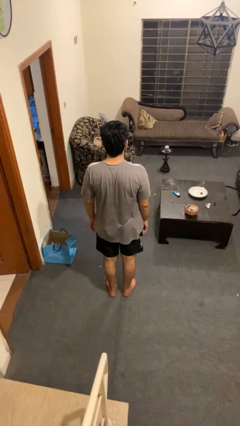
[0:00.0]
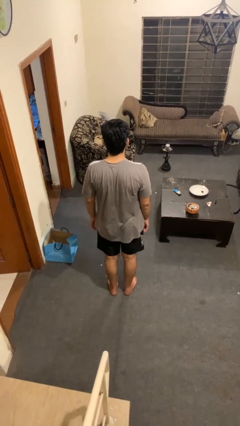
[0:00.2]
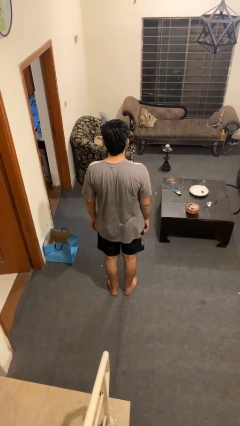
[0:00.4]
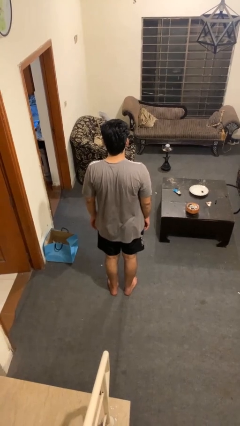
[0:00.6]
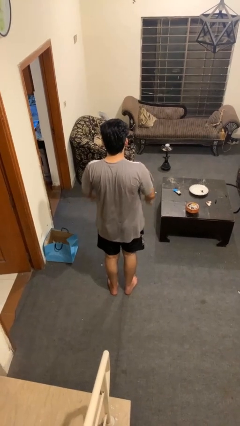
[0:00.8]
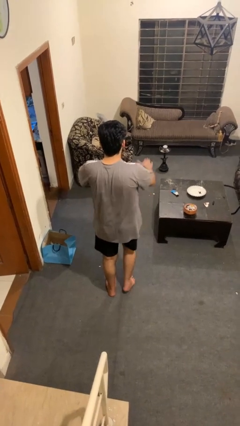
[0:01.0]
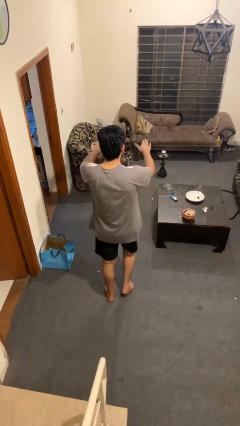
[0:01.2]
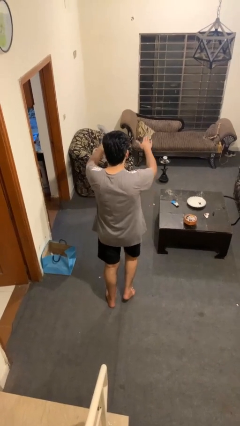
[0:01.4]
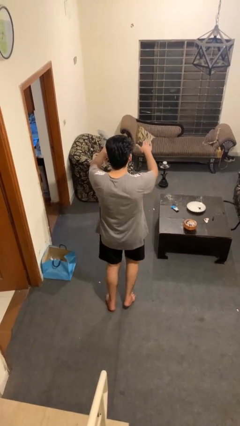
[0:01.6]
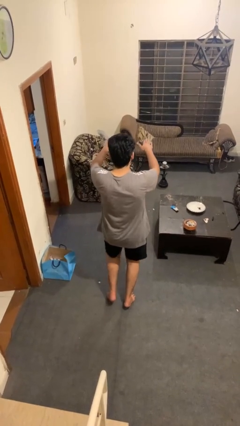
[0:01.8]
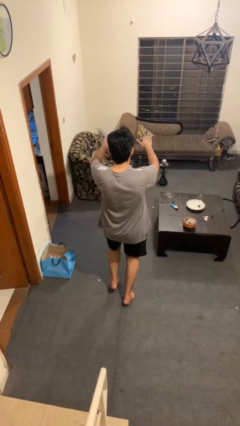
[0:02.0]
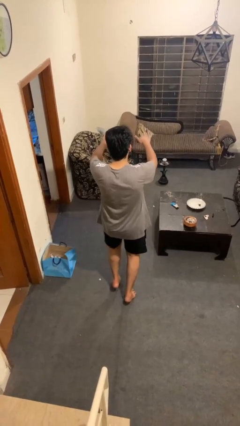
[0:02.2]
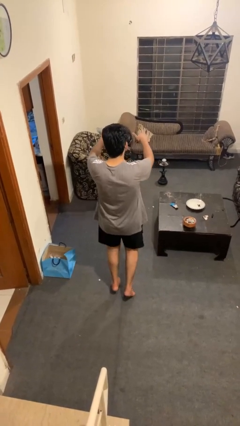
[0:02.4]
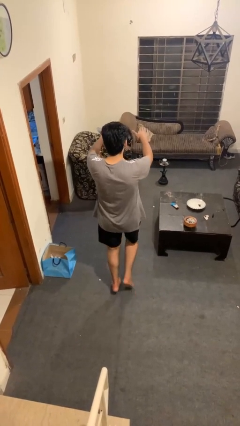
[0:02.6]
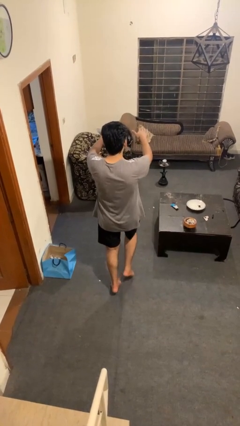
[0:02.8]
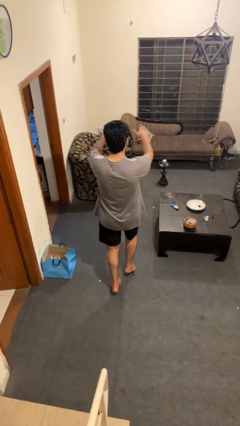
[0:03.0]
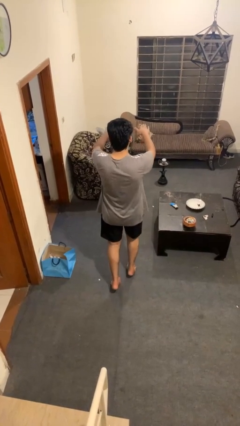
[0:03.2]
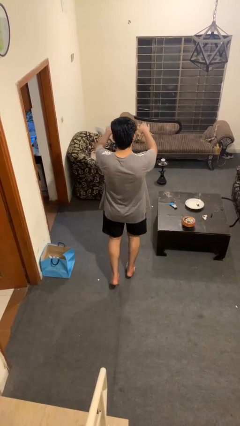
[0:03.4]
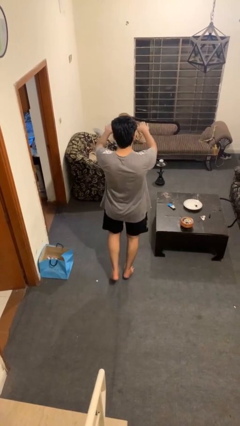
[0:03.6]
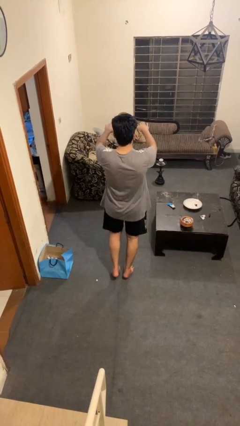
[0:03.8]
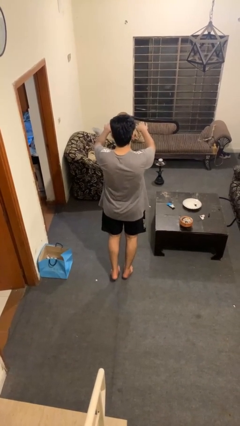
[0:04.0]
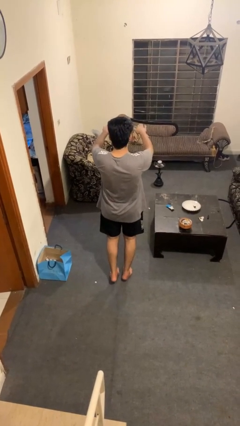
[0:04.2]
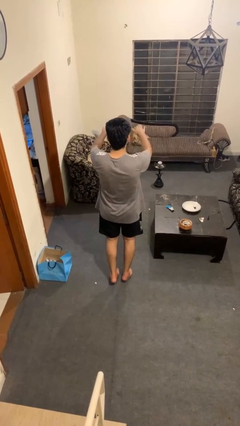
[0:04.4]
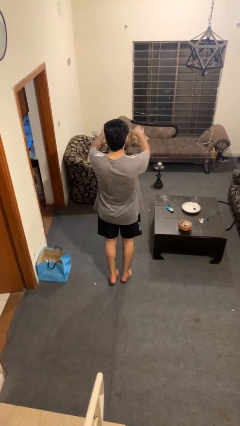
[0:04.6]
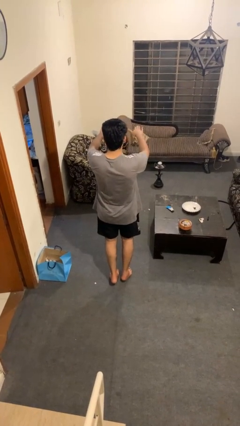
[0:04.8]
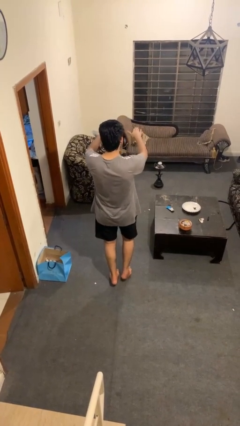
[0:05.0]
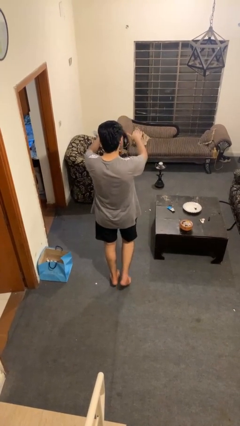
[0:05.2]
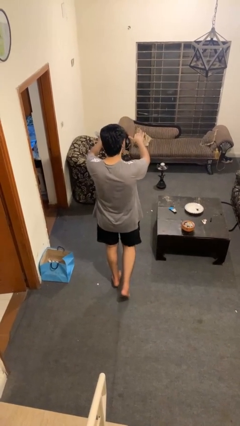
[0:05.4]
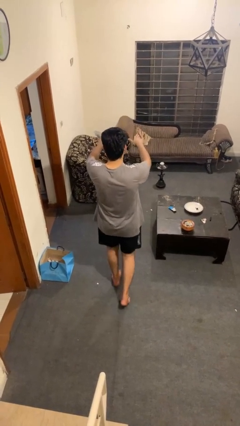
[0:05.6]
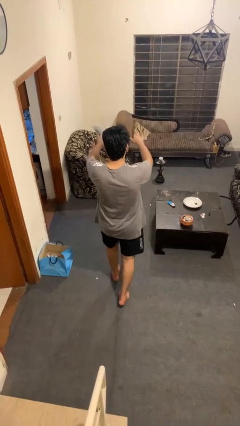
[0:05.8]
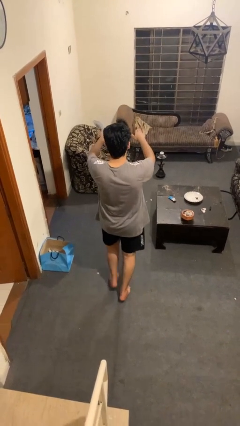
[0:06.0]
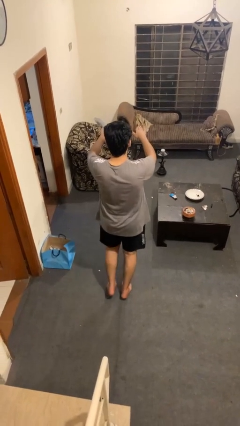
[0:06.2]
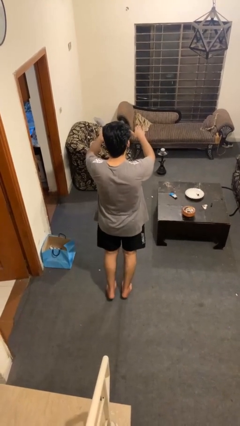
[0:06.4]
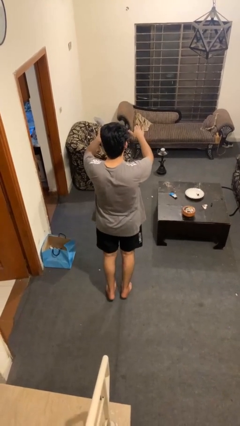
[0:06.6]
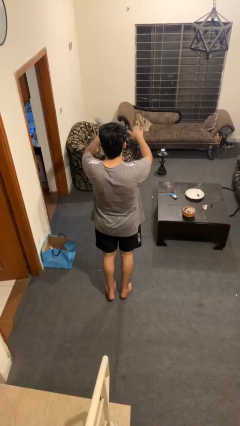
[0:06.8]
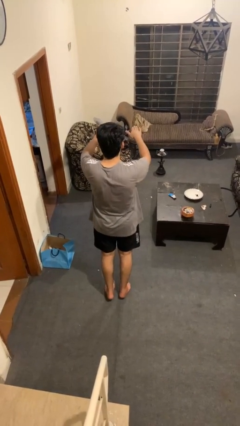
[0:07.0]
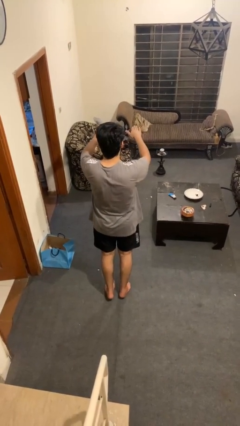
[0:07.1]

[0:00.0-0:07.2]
person walks tiptoe

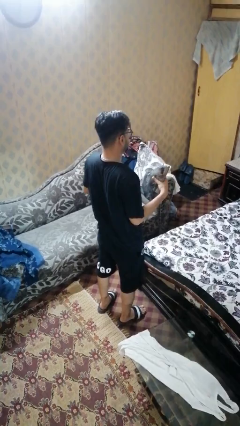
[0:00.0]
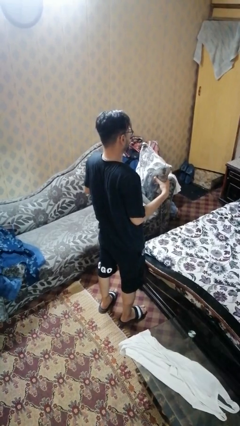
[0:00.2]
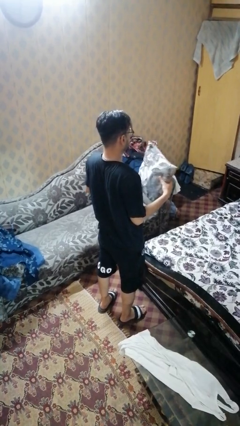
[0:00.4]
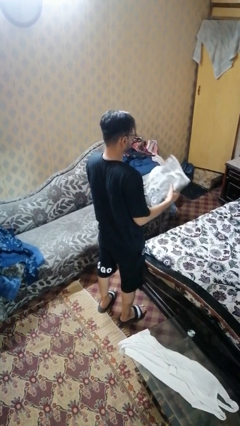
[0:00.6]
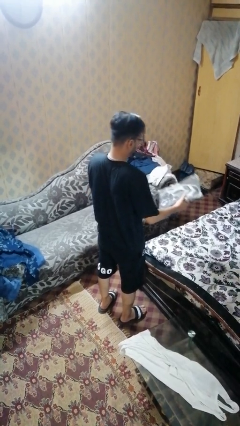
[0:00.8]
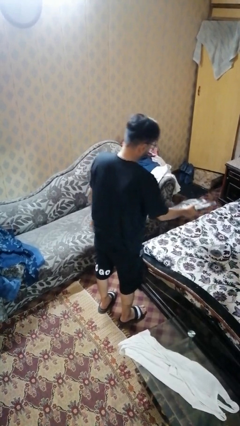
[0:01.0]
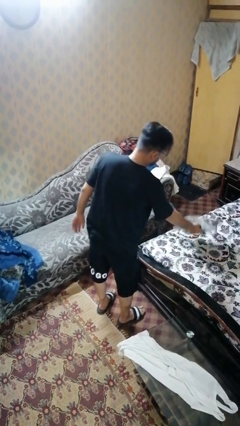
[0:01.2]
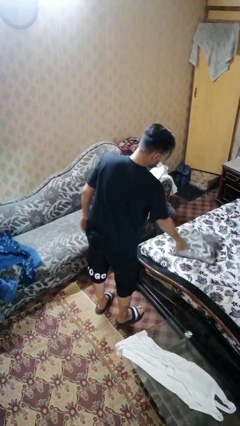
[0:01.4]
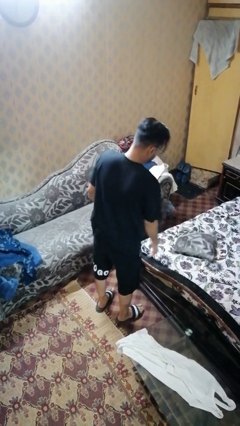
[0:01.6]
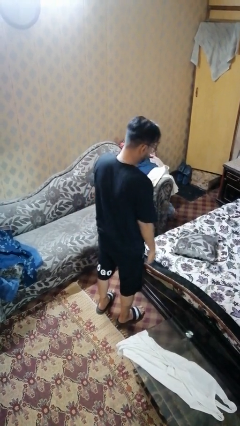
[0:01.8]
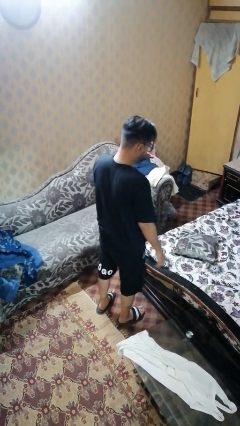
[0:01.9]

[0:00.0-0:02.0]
person puts down object on bed

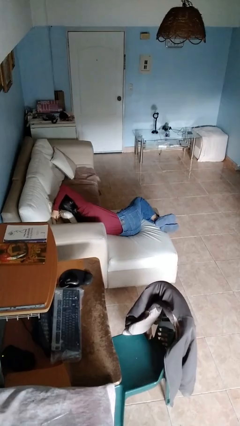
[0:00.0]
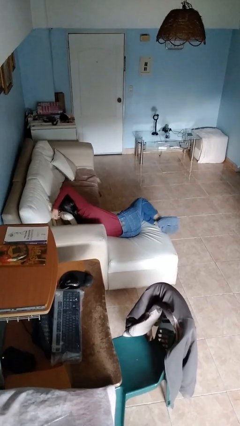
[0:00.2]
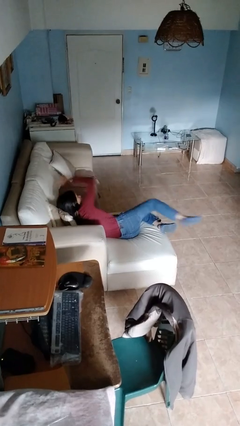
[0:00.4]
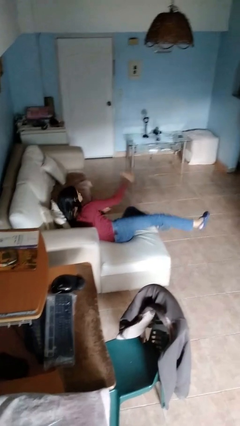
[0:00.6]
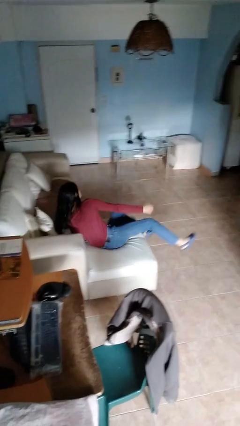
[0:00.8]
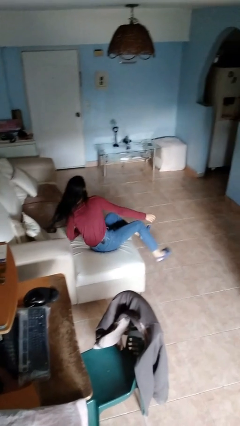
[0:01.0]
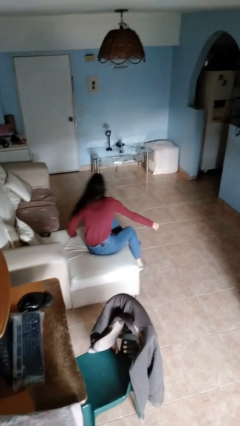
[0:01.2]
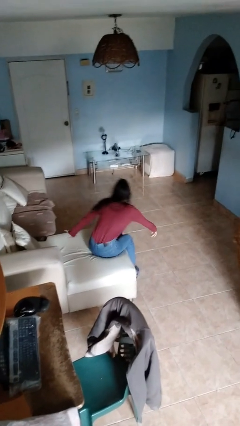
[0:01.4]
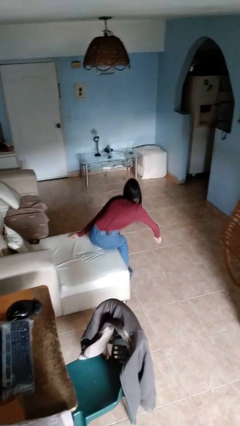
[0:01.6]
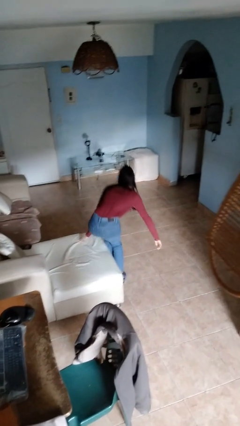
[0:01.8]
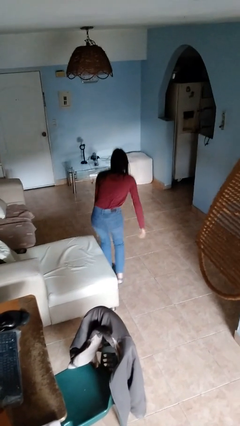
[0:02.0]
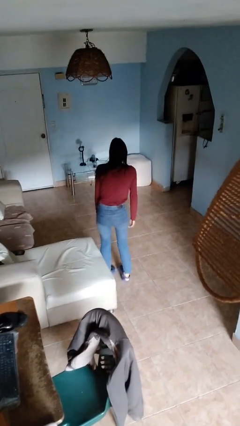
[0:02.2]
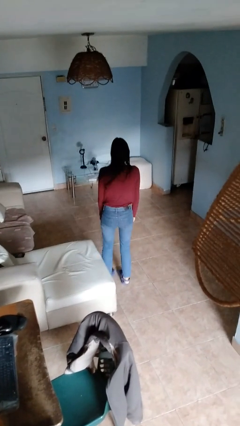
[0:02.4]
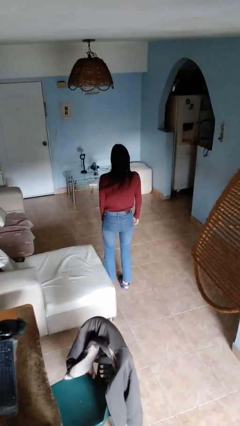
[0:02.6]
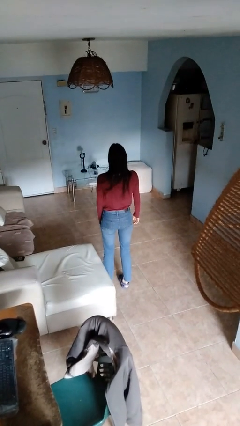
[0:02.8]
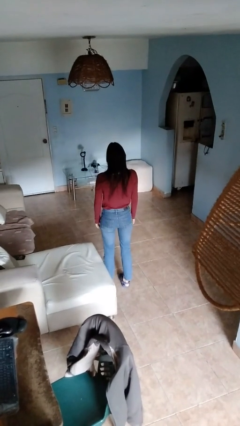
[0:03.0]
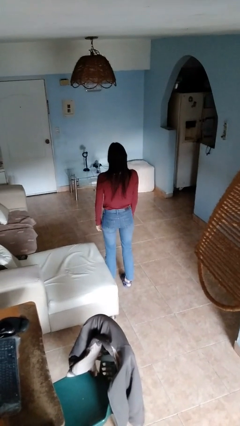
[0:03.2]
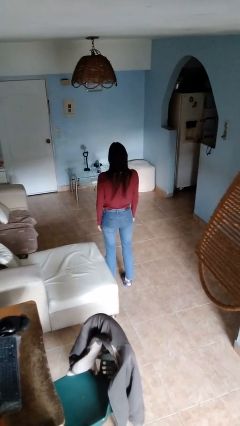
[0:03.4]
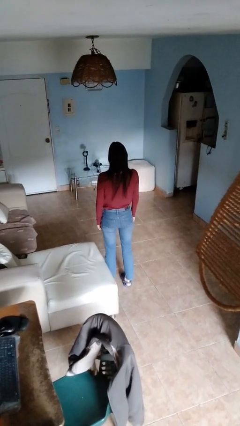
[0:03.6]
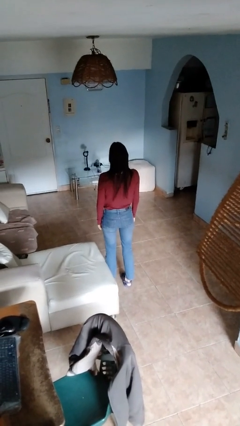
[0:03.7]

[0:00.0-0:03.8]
person stands up

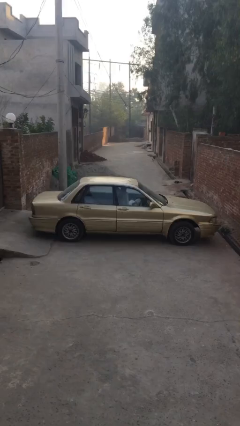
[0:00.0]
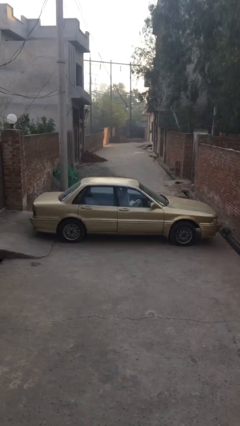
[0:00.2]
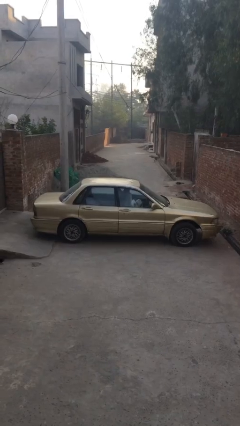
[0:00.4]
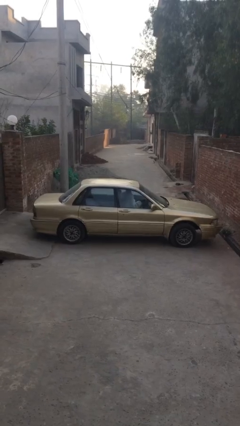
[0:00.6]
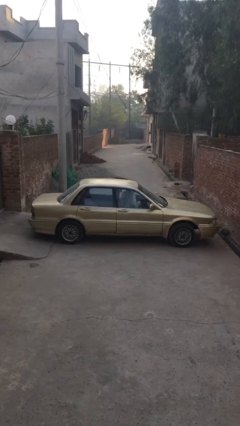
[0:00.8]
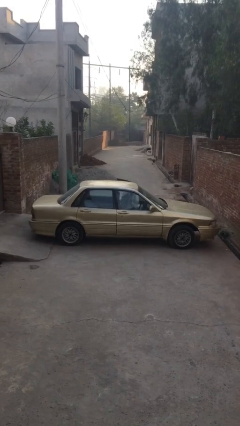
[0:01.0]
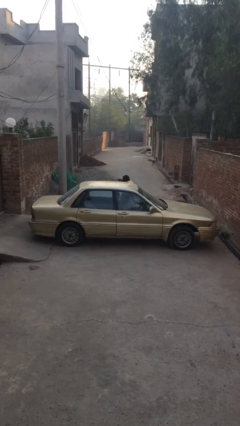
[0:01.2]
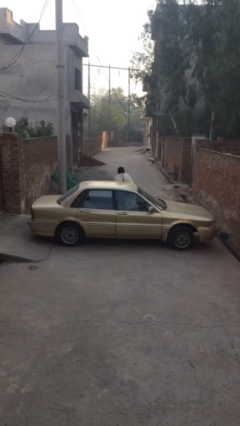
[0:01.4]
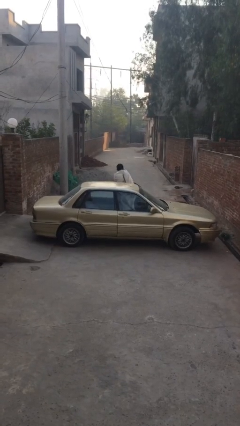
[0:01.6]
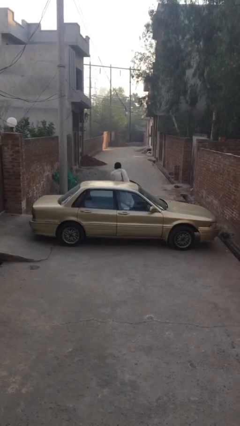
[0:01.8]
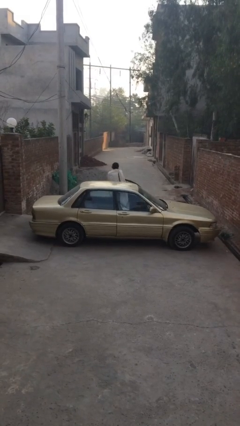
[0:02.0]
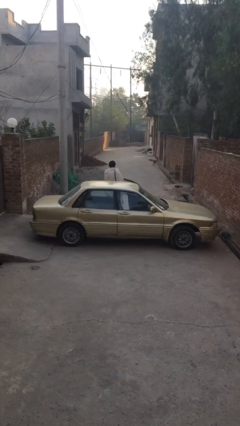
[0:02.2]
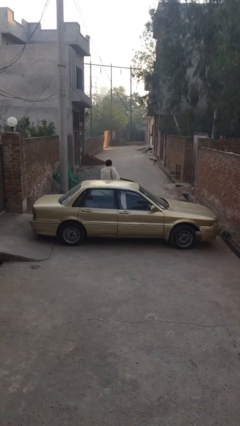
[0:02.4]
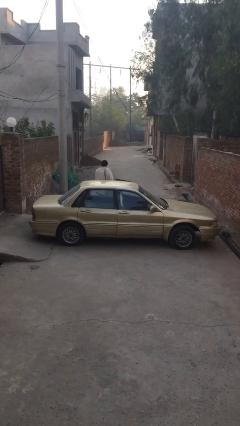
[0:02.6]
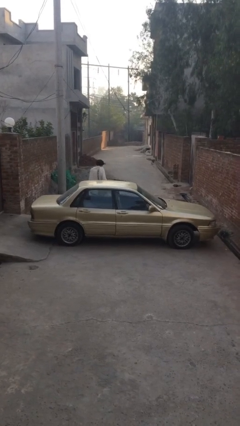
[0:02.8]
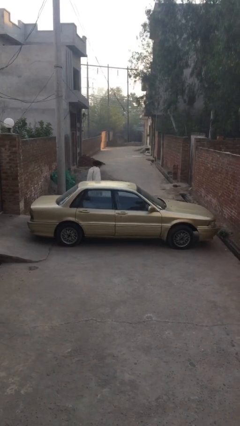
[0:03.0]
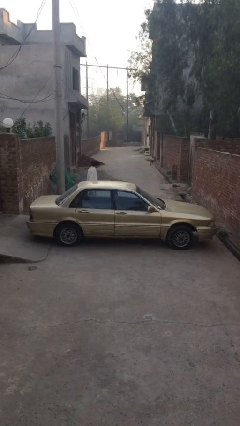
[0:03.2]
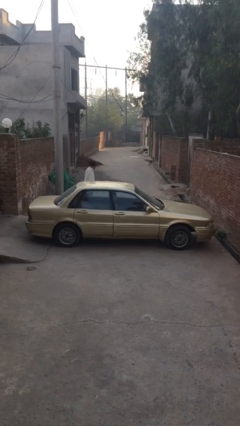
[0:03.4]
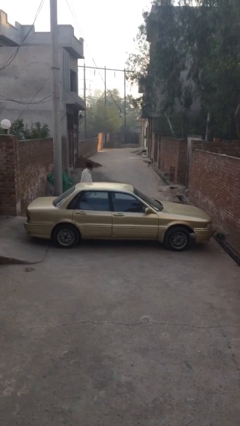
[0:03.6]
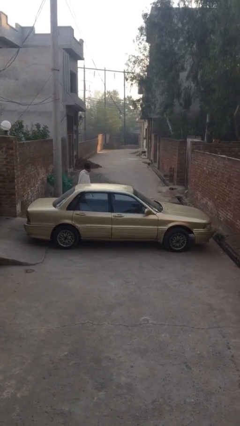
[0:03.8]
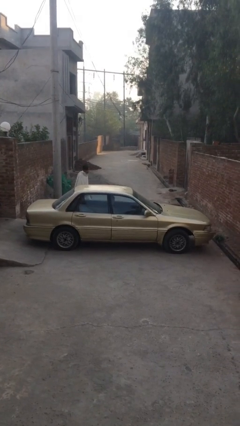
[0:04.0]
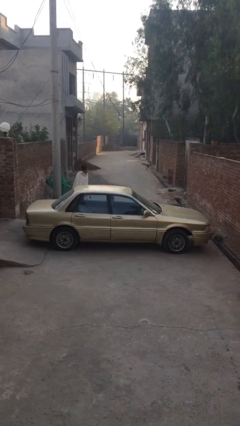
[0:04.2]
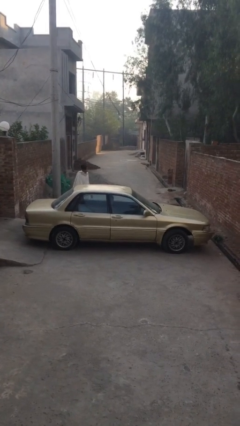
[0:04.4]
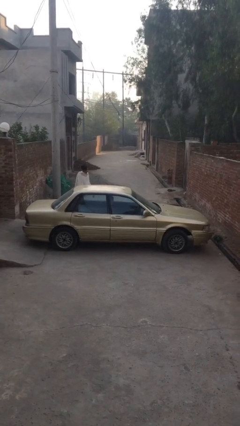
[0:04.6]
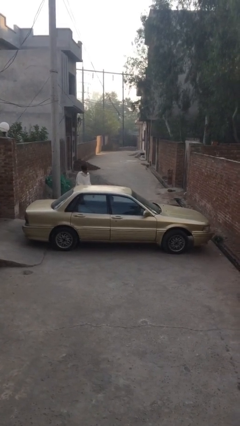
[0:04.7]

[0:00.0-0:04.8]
car drops off person
